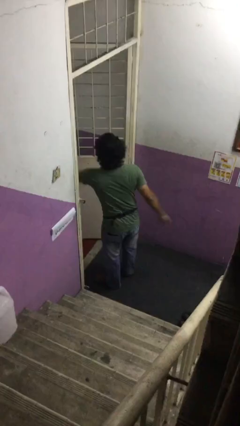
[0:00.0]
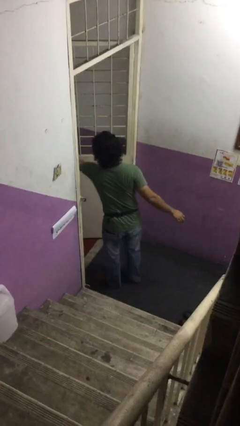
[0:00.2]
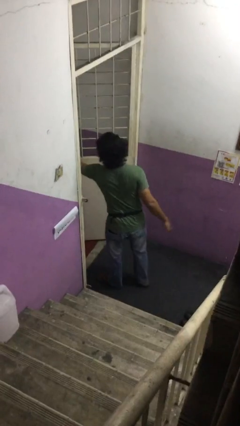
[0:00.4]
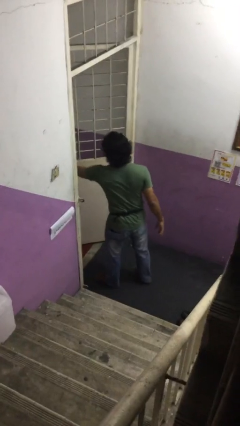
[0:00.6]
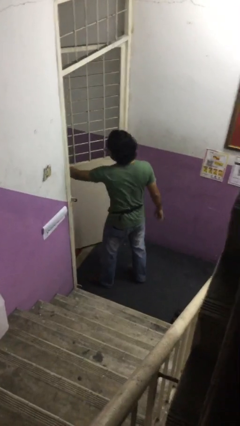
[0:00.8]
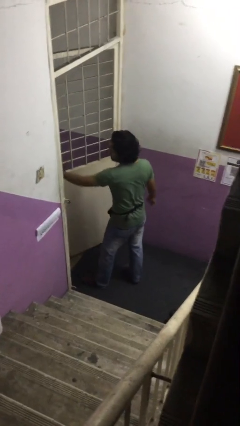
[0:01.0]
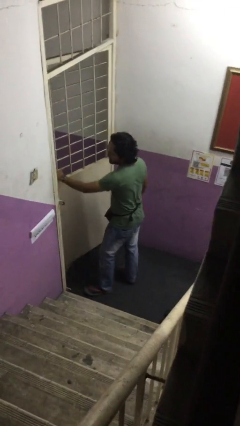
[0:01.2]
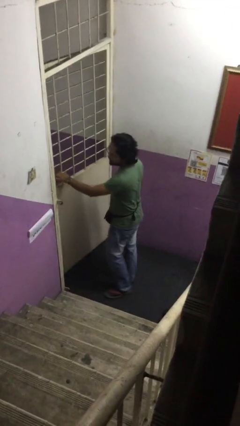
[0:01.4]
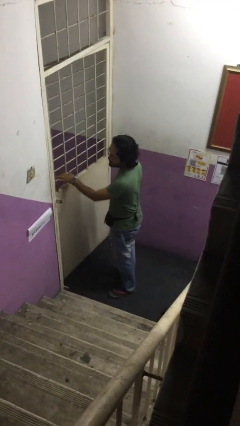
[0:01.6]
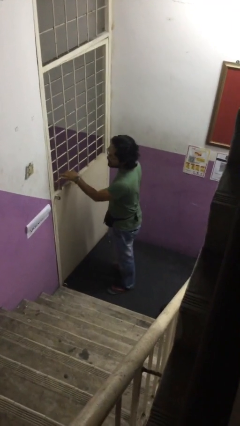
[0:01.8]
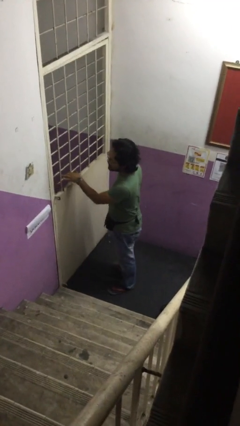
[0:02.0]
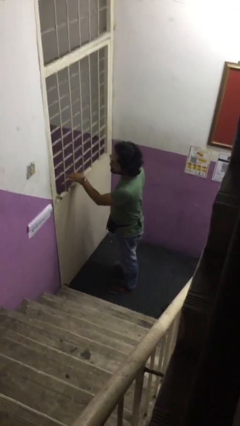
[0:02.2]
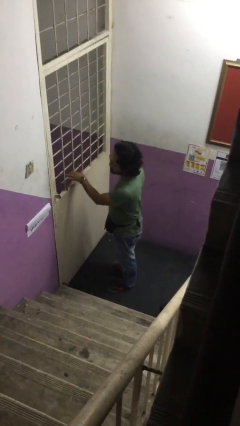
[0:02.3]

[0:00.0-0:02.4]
person closes facility door

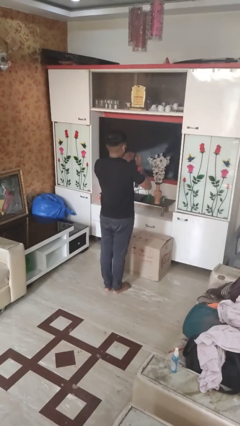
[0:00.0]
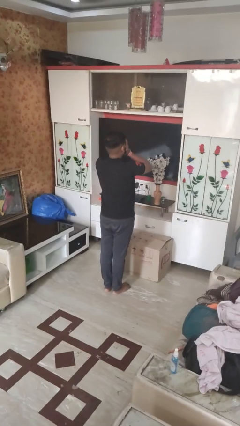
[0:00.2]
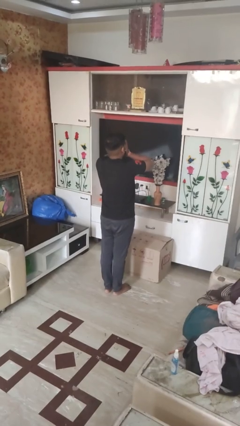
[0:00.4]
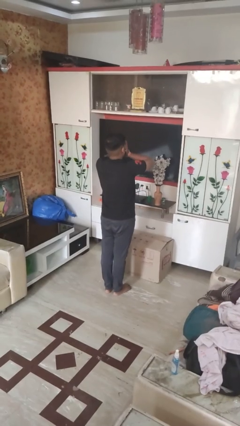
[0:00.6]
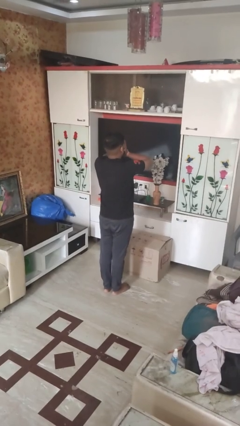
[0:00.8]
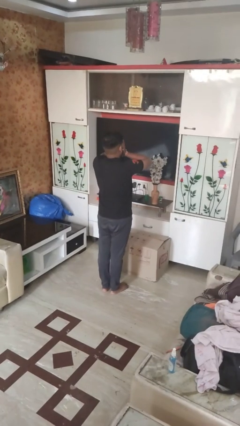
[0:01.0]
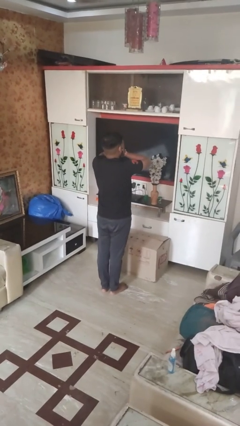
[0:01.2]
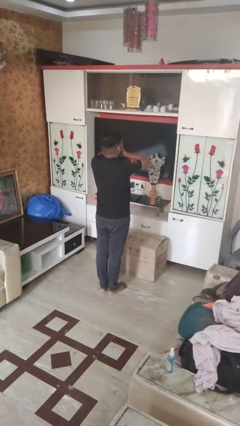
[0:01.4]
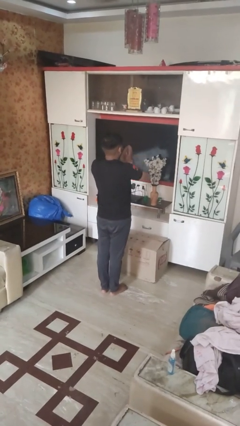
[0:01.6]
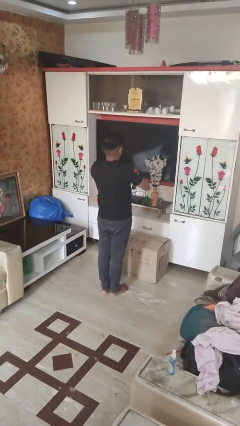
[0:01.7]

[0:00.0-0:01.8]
person covers face with hands

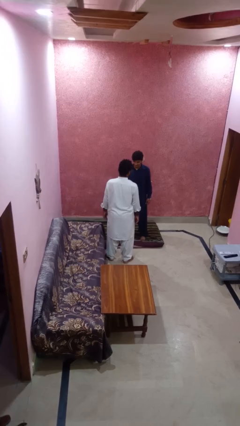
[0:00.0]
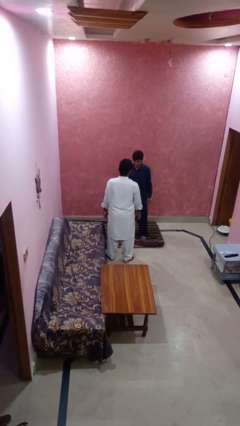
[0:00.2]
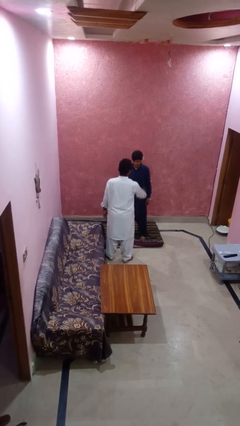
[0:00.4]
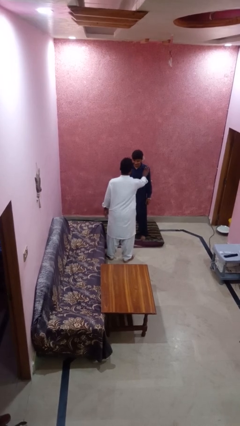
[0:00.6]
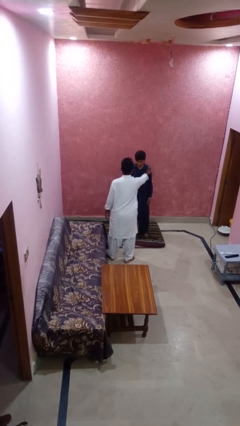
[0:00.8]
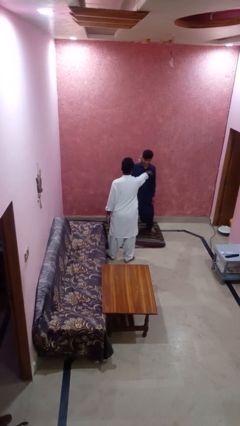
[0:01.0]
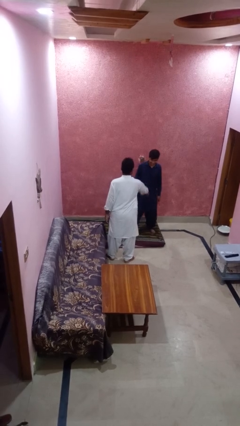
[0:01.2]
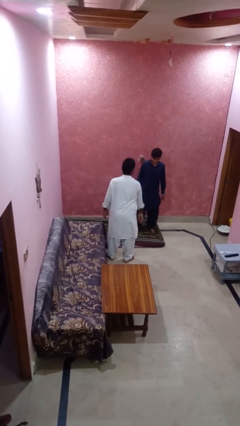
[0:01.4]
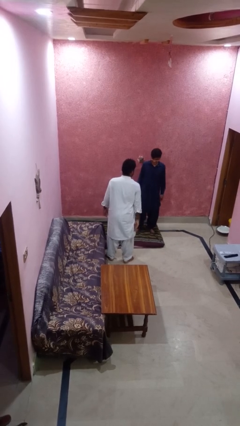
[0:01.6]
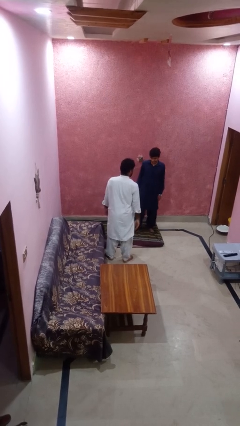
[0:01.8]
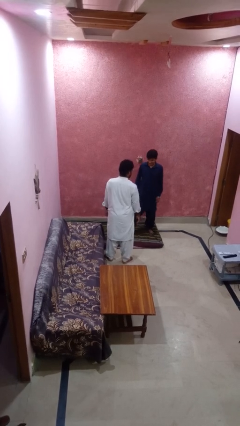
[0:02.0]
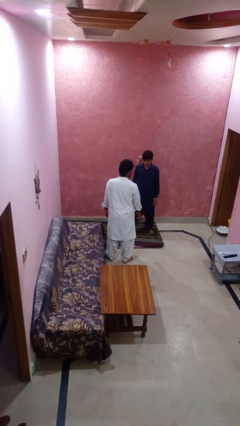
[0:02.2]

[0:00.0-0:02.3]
person shoves person

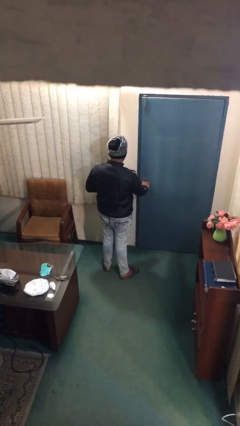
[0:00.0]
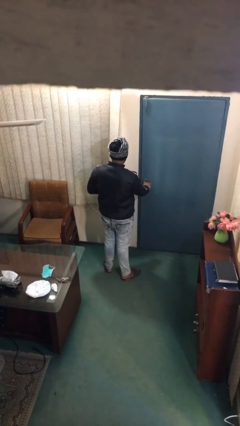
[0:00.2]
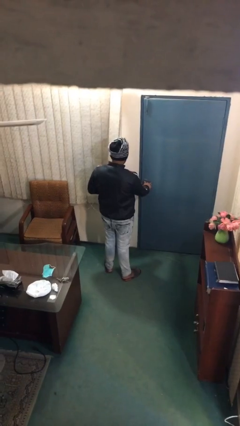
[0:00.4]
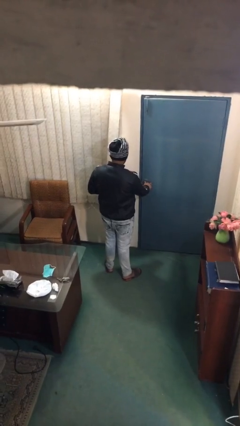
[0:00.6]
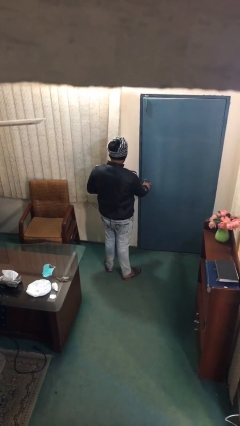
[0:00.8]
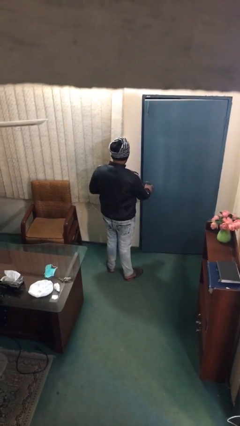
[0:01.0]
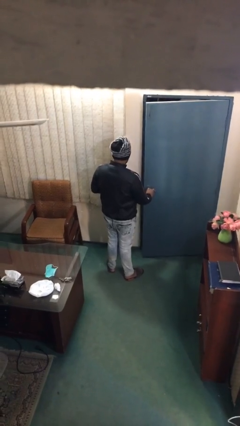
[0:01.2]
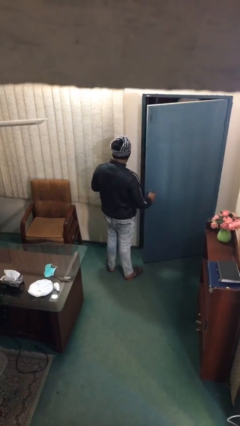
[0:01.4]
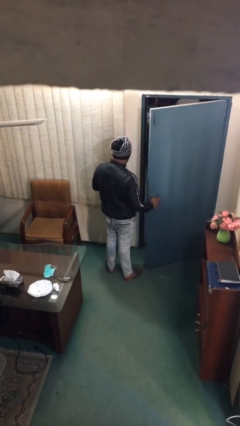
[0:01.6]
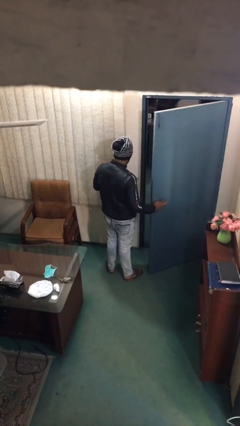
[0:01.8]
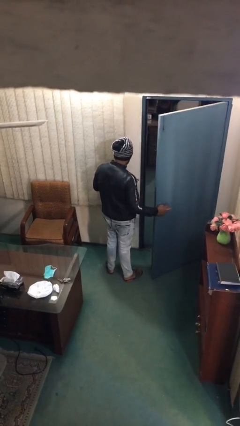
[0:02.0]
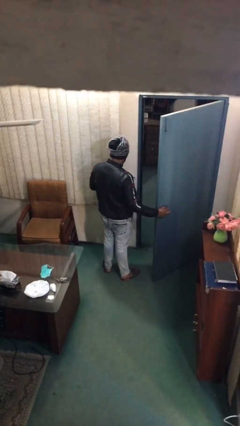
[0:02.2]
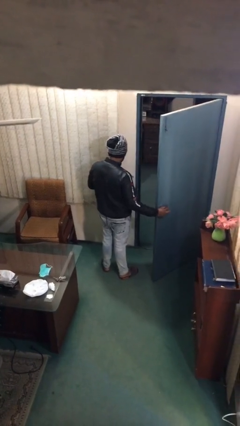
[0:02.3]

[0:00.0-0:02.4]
person opens facility door

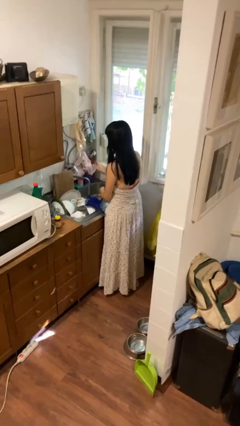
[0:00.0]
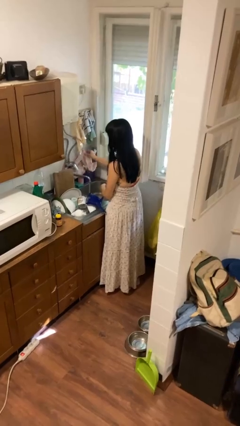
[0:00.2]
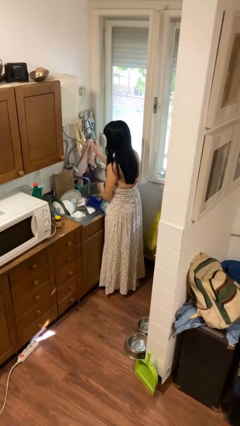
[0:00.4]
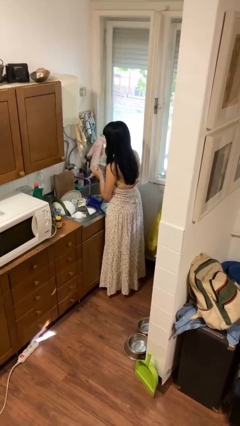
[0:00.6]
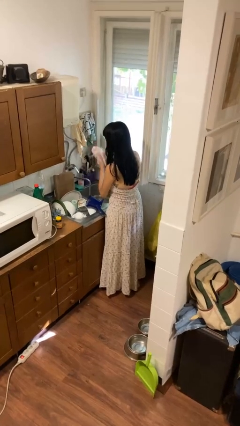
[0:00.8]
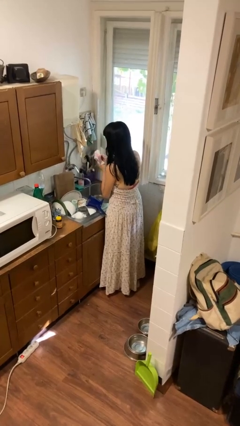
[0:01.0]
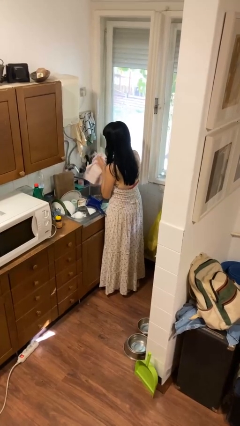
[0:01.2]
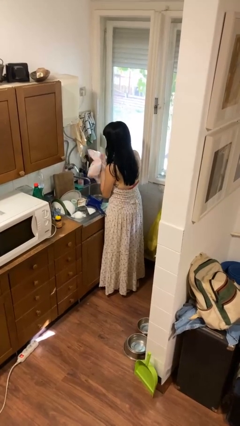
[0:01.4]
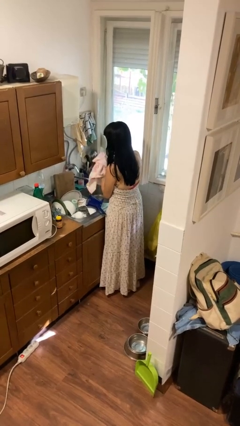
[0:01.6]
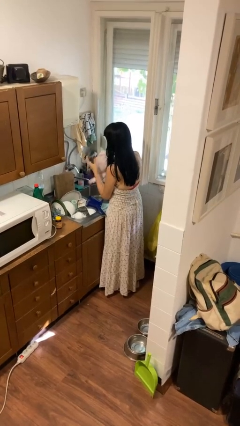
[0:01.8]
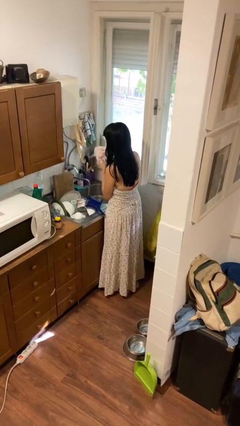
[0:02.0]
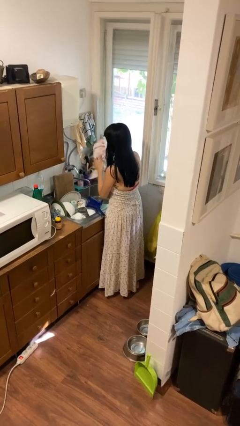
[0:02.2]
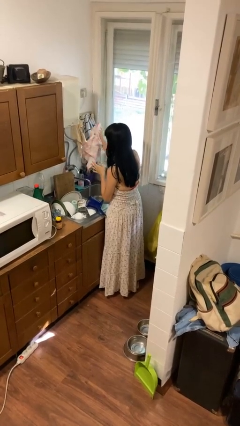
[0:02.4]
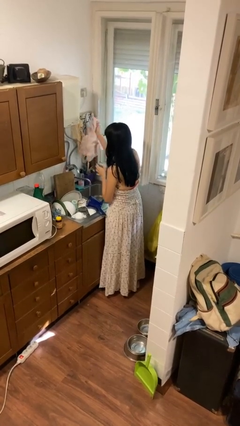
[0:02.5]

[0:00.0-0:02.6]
person dries hands with towel

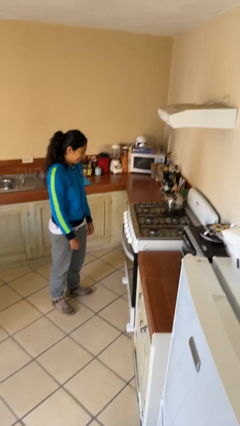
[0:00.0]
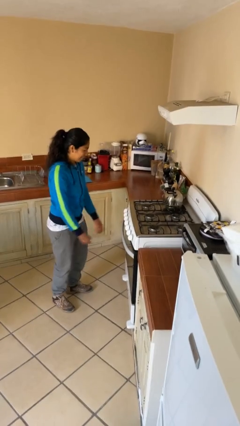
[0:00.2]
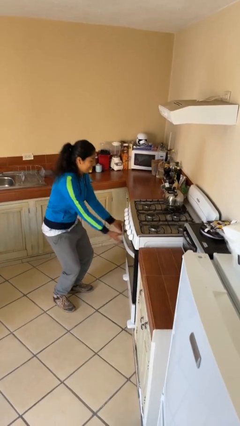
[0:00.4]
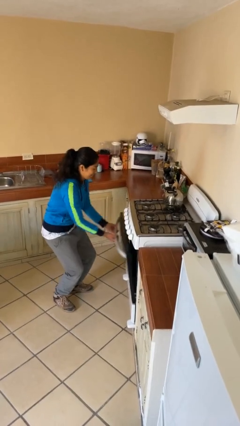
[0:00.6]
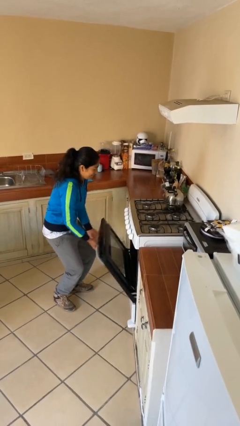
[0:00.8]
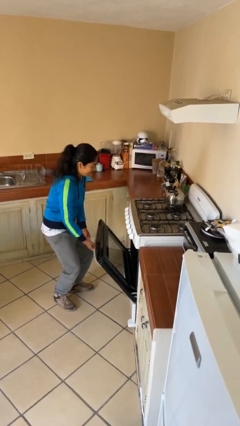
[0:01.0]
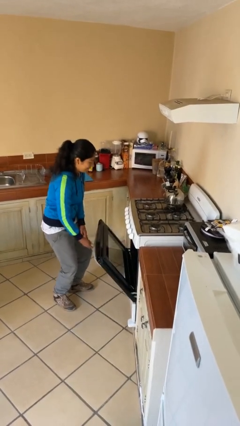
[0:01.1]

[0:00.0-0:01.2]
person opens oven door

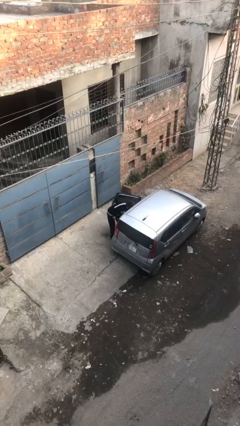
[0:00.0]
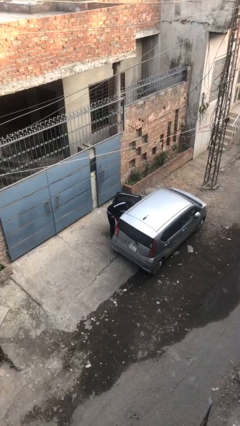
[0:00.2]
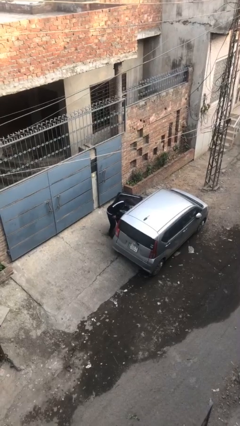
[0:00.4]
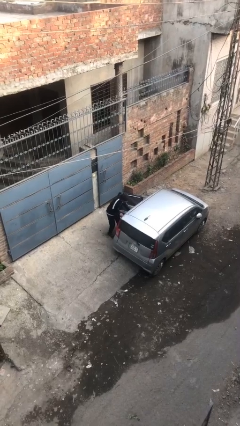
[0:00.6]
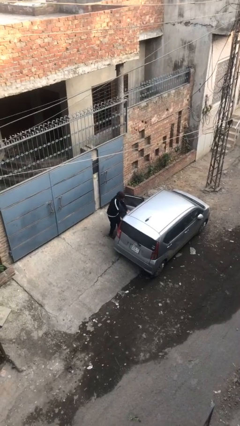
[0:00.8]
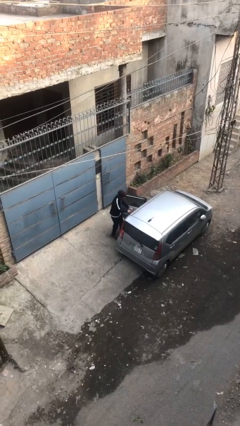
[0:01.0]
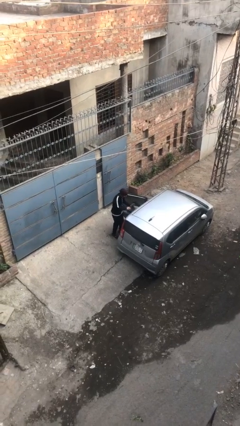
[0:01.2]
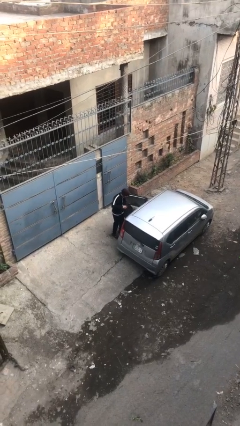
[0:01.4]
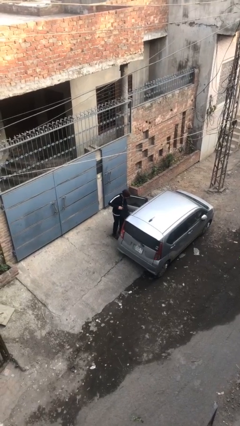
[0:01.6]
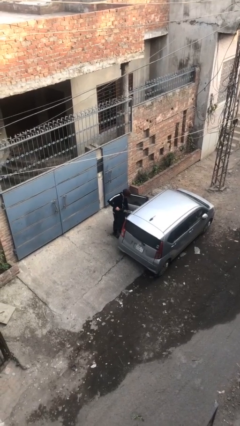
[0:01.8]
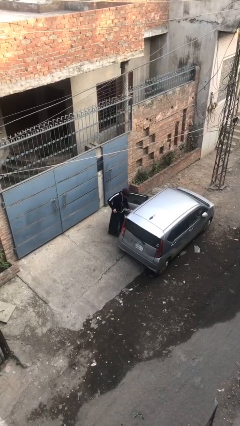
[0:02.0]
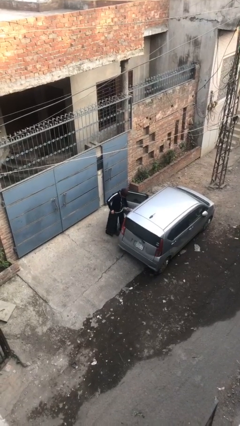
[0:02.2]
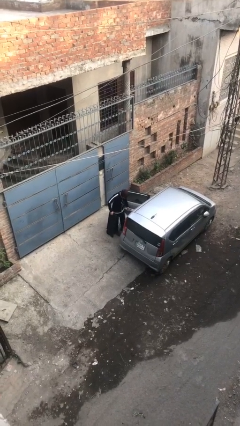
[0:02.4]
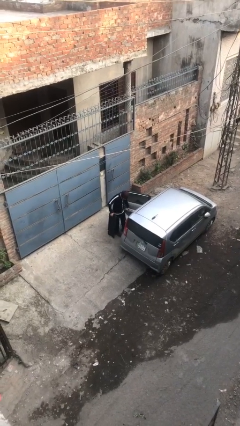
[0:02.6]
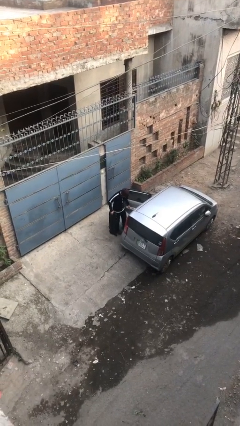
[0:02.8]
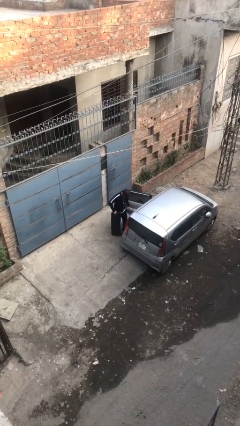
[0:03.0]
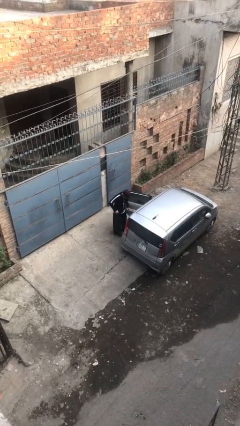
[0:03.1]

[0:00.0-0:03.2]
person unloads car

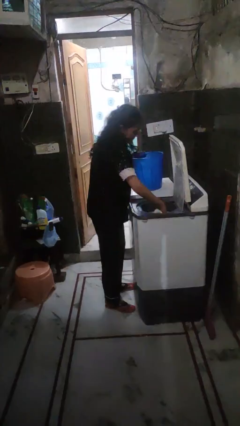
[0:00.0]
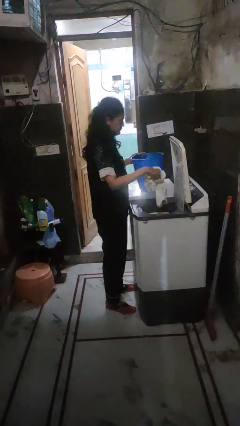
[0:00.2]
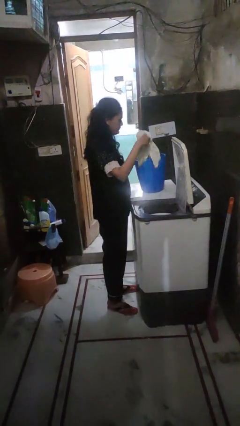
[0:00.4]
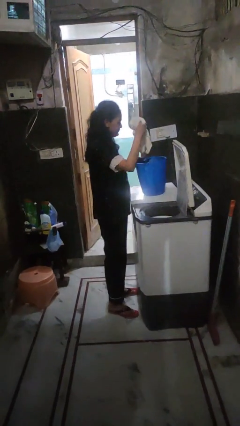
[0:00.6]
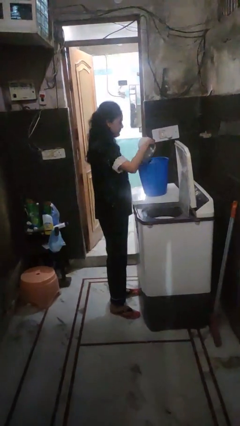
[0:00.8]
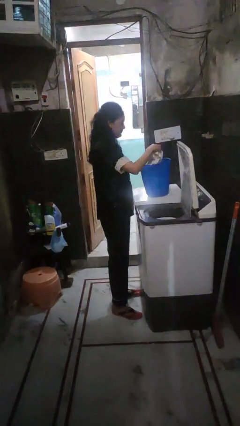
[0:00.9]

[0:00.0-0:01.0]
person unloads dryer

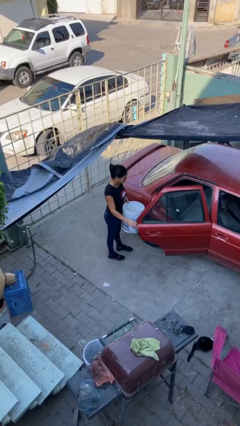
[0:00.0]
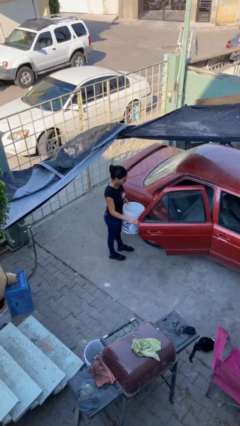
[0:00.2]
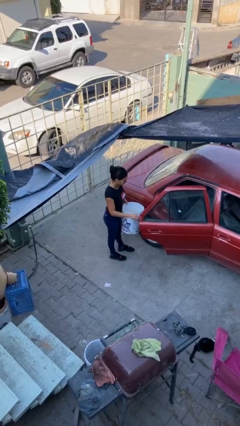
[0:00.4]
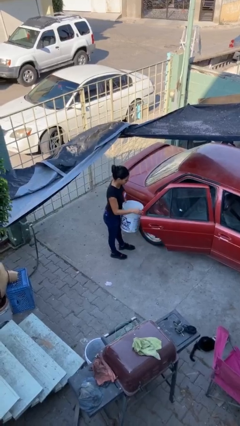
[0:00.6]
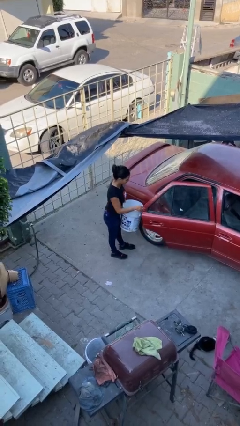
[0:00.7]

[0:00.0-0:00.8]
person closes car door
